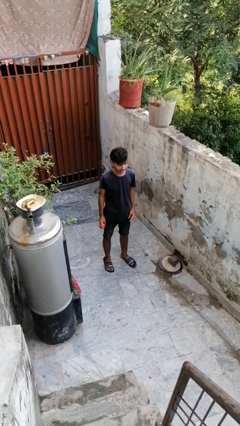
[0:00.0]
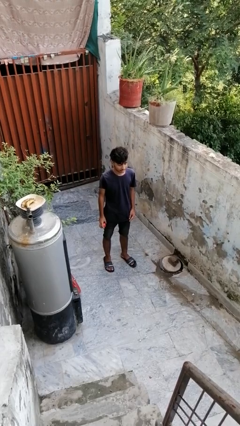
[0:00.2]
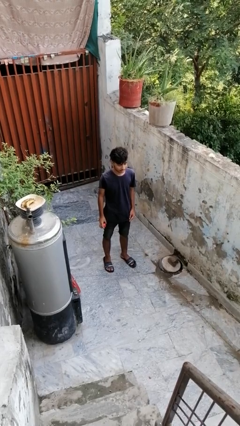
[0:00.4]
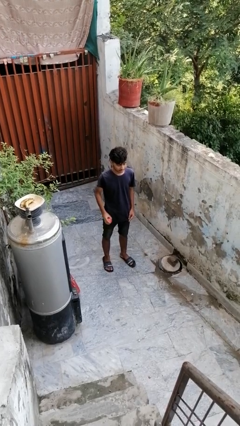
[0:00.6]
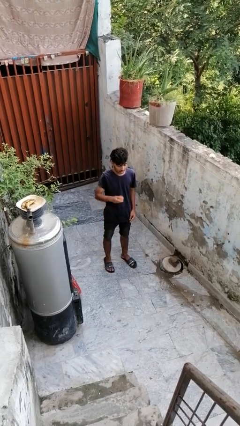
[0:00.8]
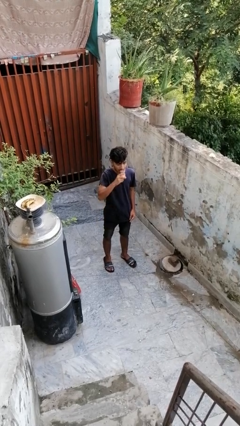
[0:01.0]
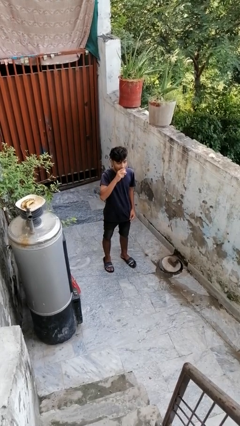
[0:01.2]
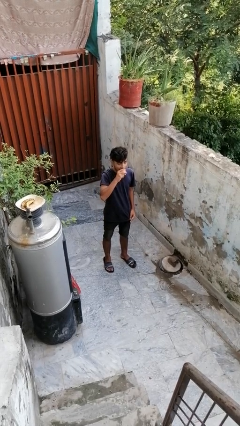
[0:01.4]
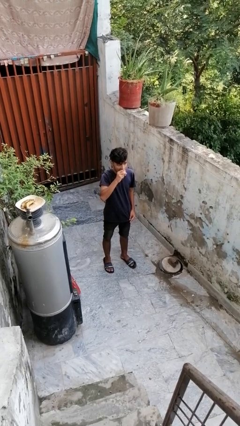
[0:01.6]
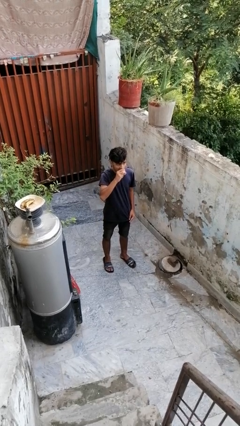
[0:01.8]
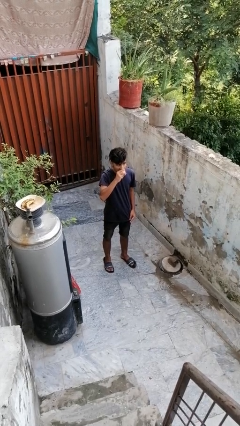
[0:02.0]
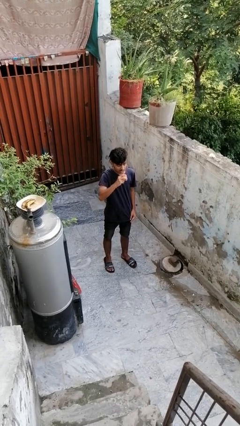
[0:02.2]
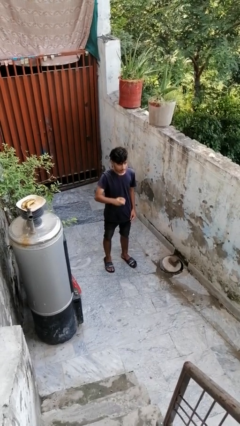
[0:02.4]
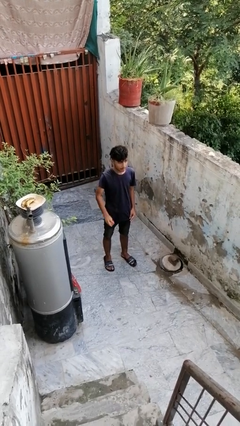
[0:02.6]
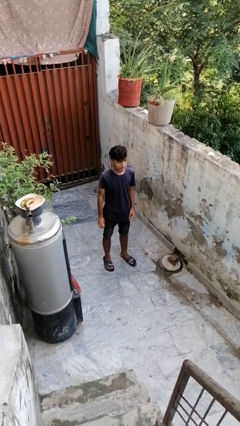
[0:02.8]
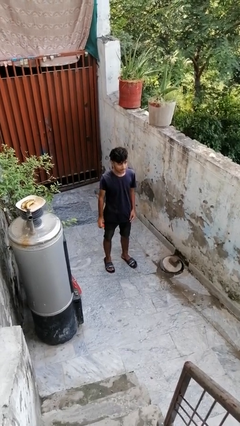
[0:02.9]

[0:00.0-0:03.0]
person eats apple

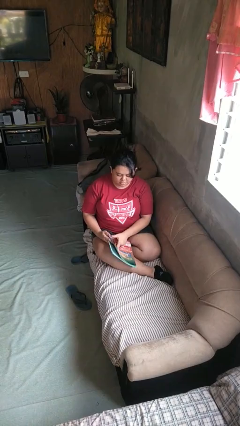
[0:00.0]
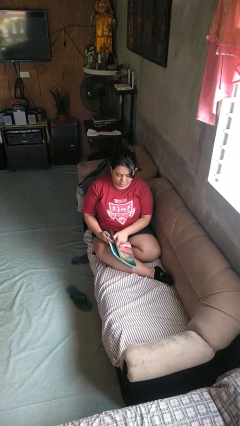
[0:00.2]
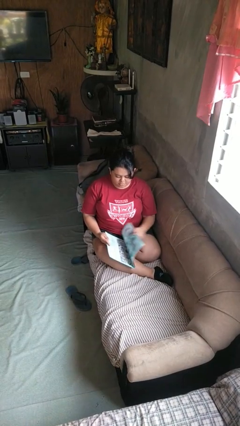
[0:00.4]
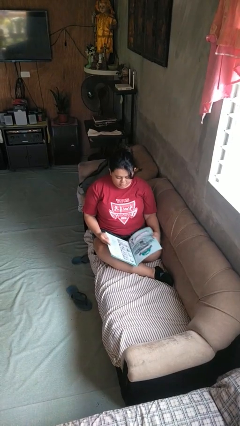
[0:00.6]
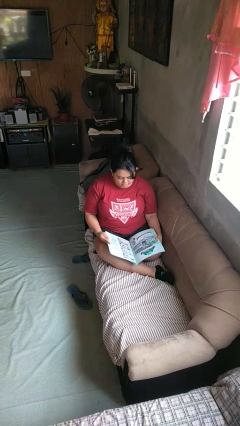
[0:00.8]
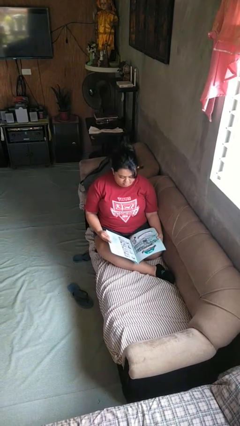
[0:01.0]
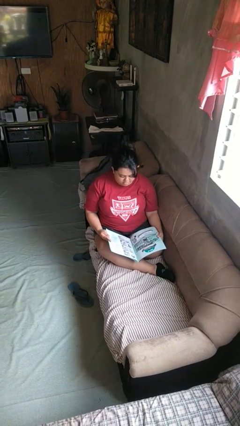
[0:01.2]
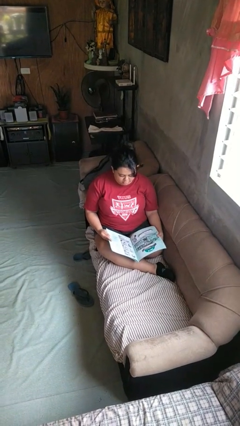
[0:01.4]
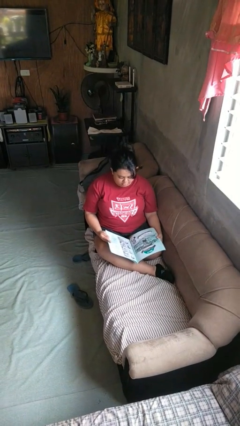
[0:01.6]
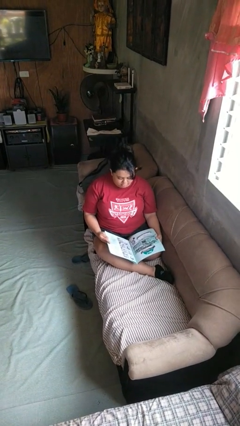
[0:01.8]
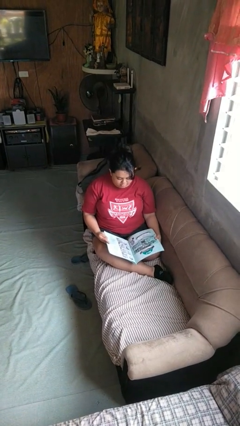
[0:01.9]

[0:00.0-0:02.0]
person reads magazine

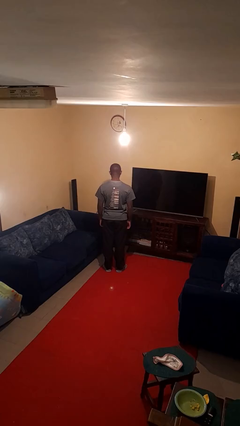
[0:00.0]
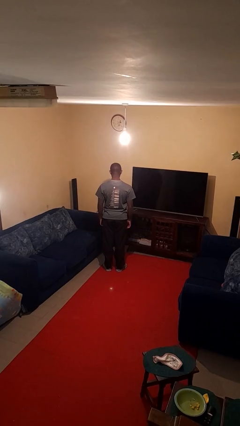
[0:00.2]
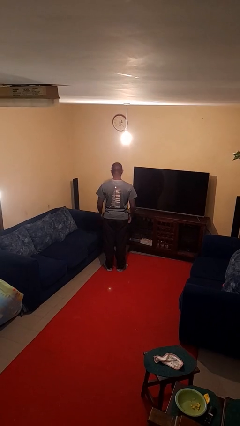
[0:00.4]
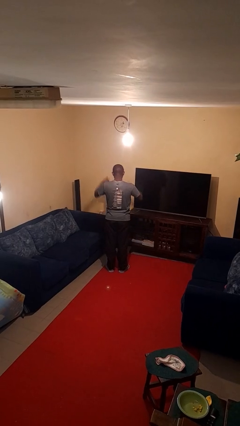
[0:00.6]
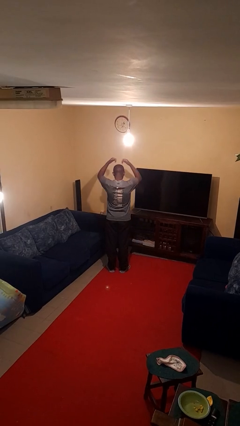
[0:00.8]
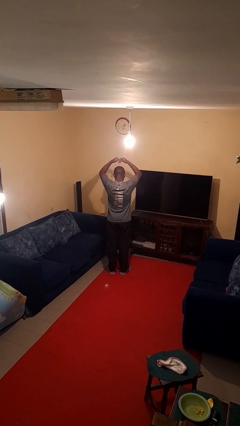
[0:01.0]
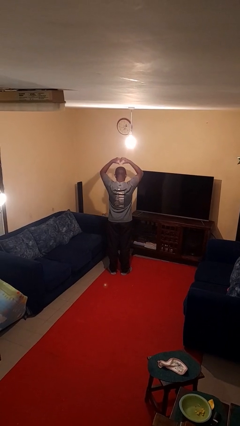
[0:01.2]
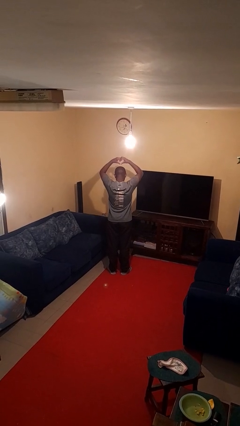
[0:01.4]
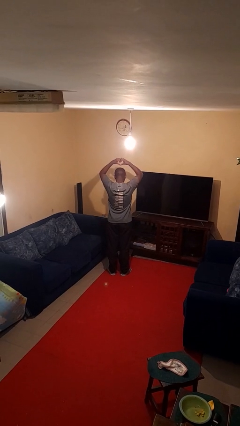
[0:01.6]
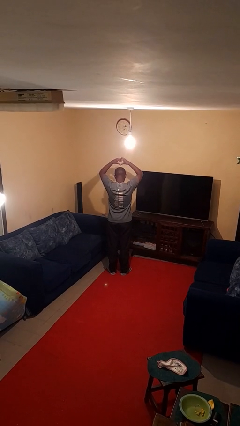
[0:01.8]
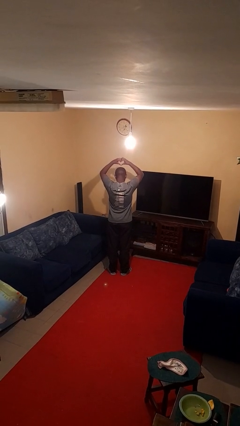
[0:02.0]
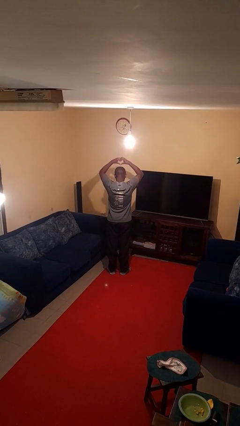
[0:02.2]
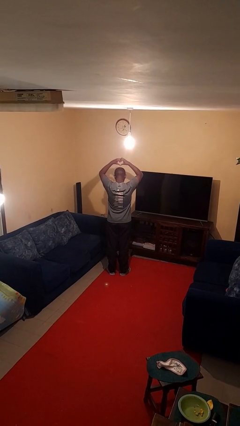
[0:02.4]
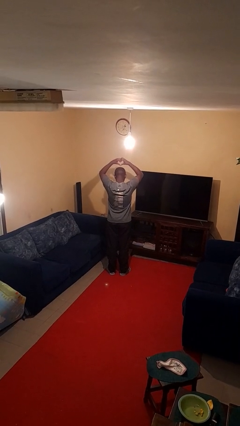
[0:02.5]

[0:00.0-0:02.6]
person gestures heart

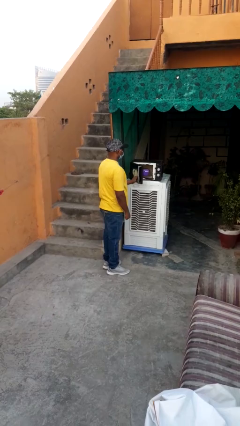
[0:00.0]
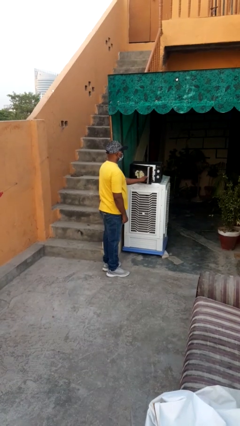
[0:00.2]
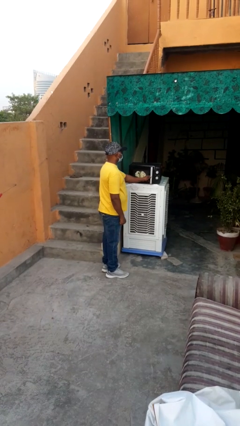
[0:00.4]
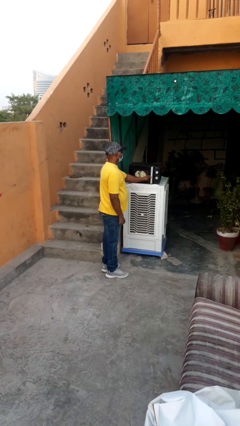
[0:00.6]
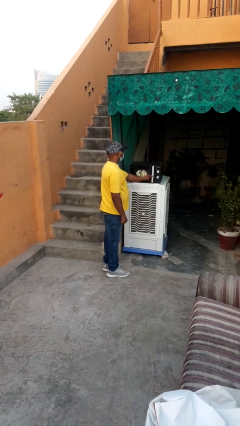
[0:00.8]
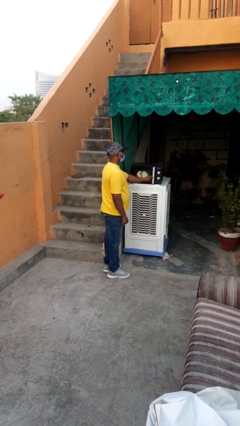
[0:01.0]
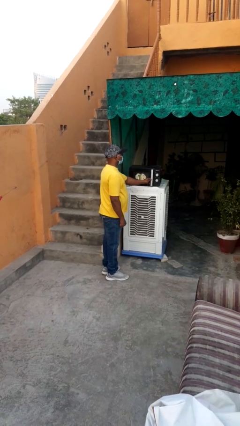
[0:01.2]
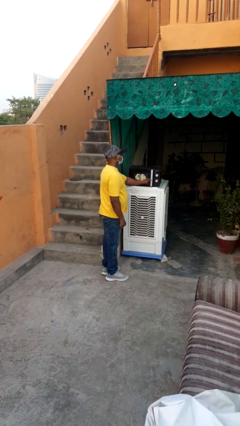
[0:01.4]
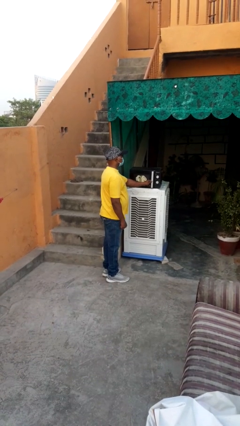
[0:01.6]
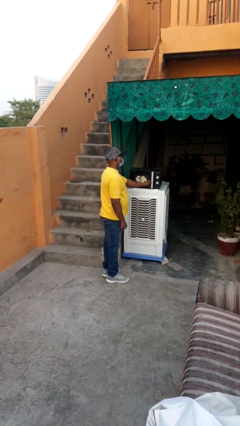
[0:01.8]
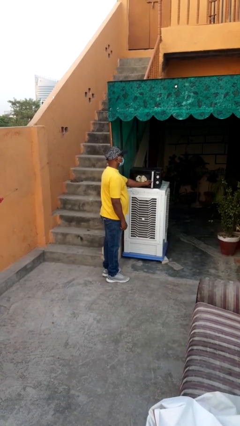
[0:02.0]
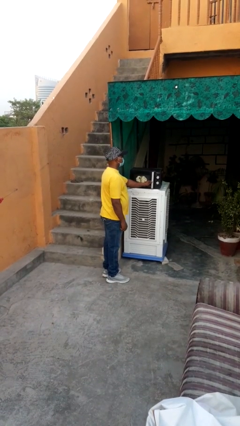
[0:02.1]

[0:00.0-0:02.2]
person closes microwave

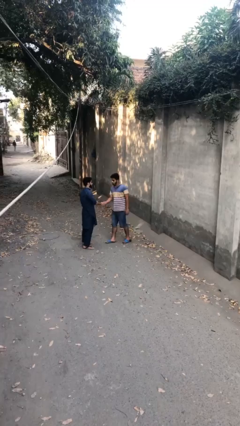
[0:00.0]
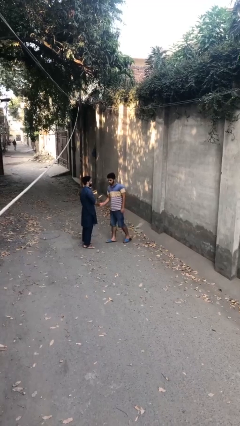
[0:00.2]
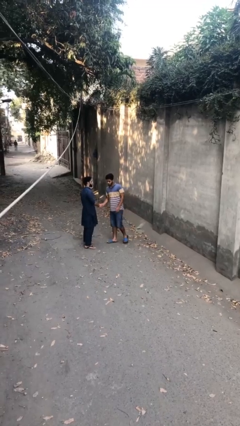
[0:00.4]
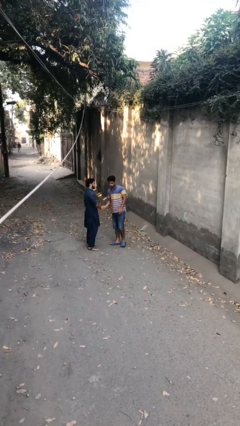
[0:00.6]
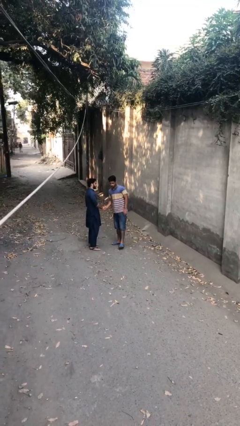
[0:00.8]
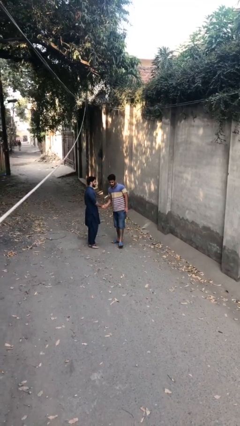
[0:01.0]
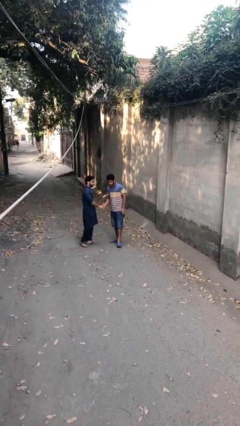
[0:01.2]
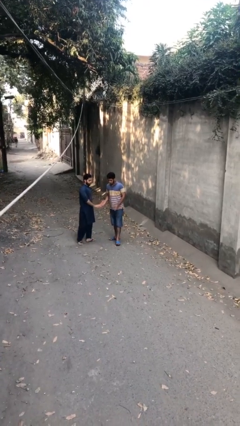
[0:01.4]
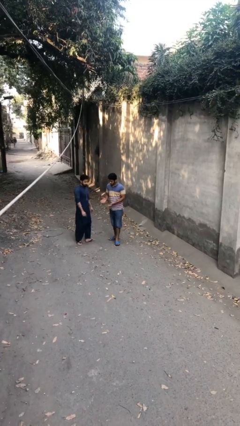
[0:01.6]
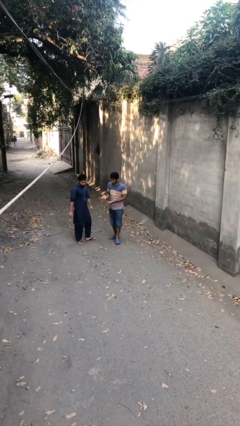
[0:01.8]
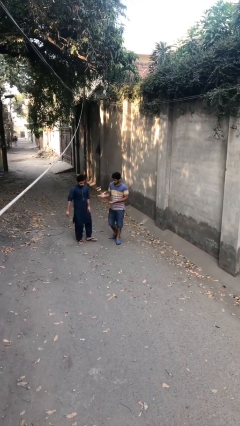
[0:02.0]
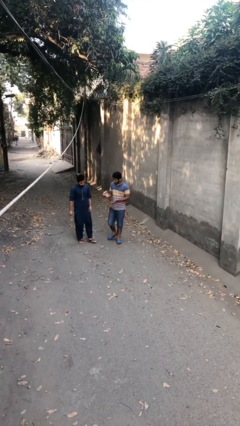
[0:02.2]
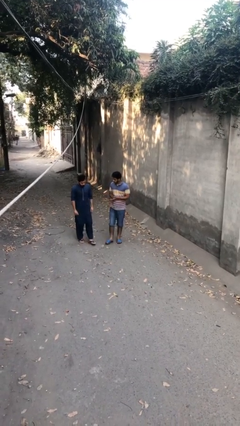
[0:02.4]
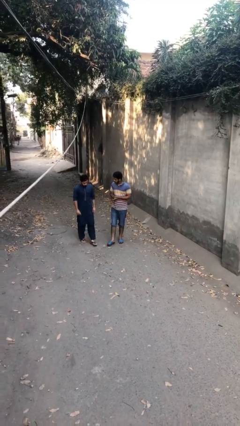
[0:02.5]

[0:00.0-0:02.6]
person shakes hand

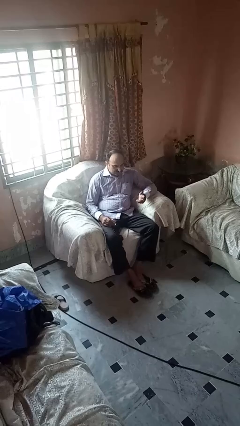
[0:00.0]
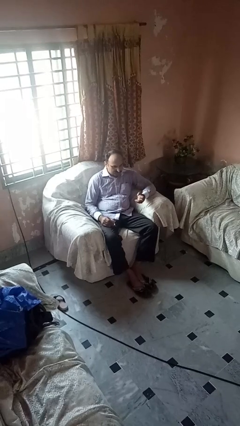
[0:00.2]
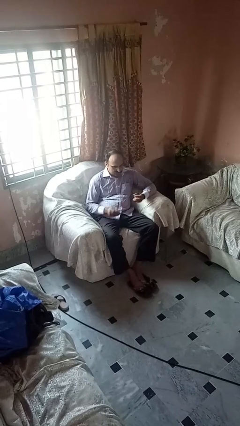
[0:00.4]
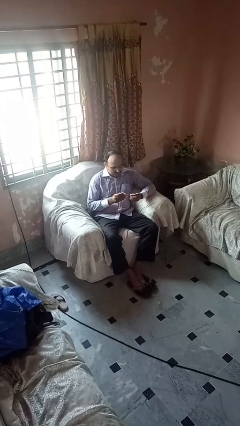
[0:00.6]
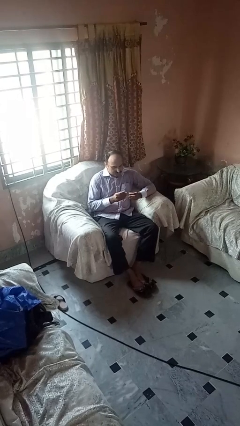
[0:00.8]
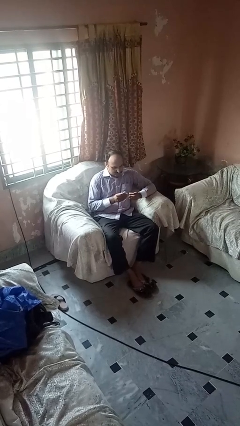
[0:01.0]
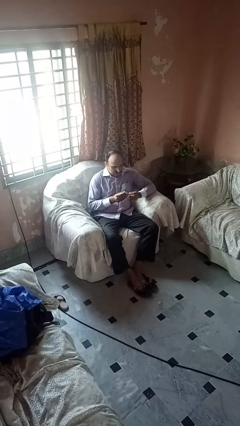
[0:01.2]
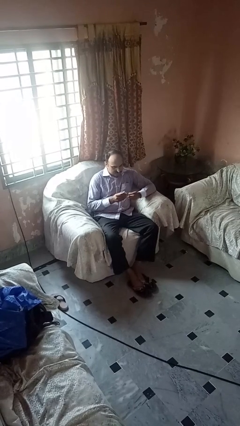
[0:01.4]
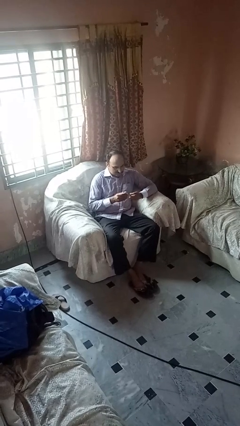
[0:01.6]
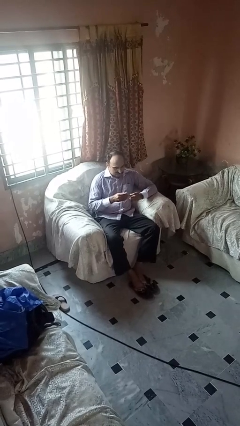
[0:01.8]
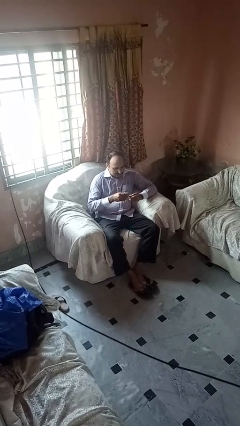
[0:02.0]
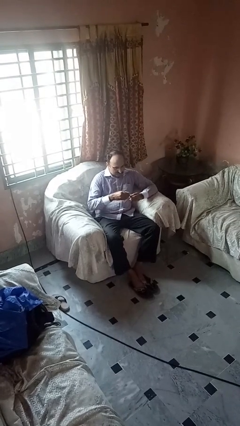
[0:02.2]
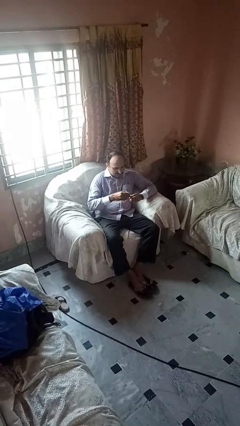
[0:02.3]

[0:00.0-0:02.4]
person clips fingernails

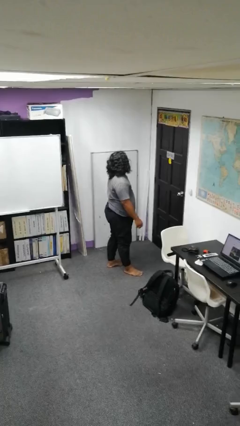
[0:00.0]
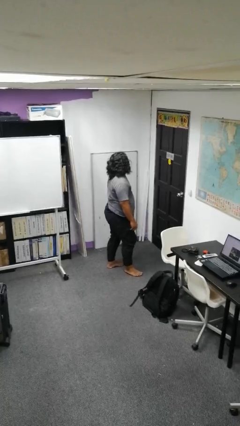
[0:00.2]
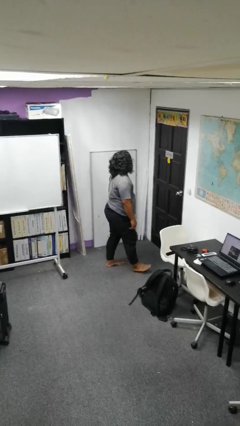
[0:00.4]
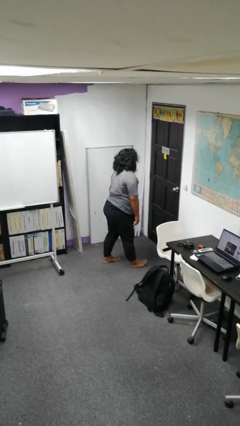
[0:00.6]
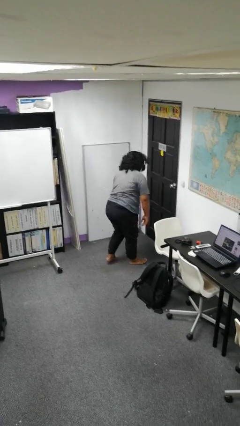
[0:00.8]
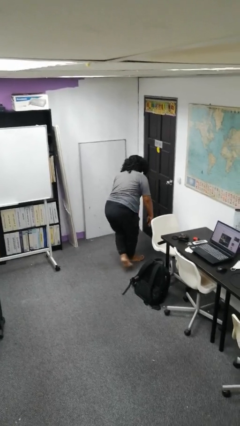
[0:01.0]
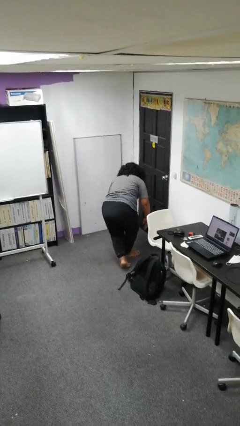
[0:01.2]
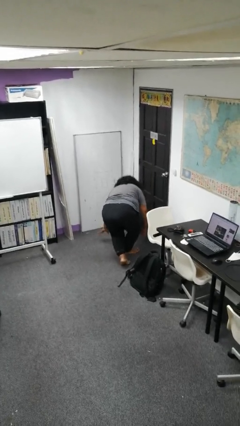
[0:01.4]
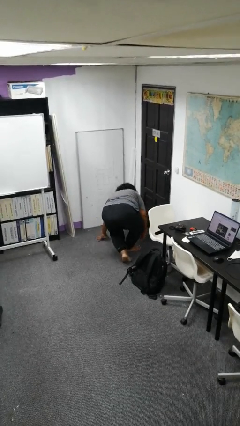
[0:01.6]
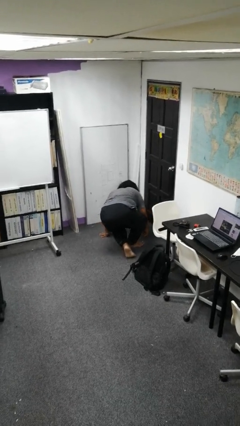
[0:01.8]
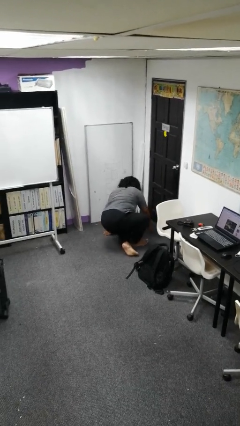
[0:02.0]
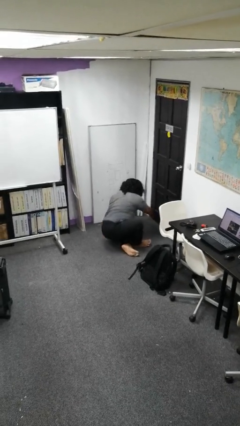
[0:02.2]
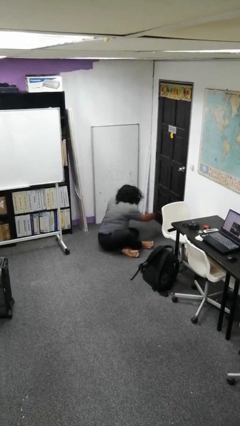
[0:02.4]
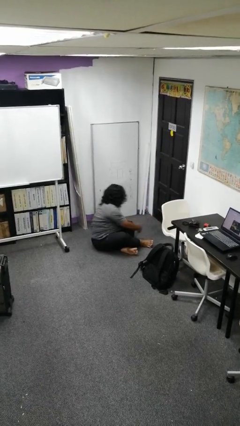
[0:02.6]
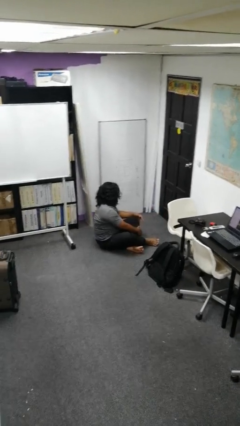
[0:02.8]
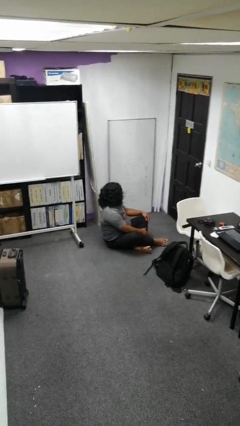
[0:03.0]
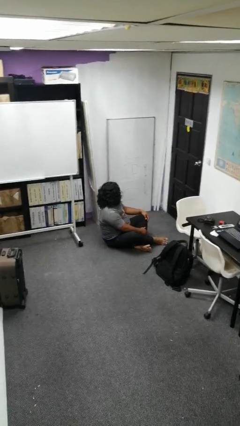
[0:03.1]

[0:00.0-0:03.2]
person sits crisscross
